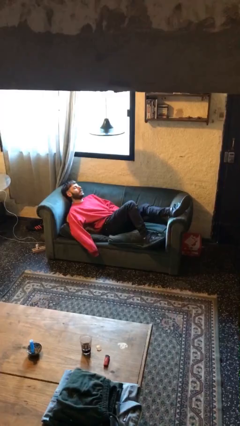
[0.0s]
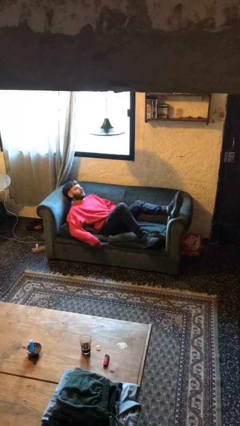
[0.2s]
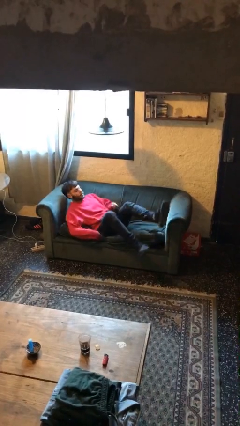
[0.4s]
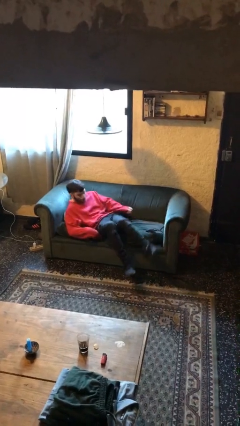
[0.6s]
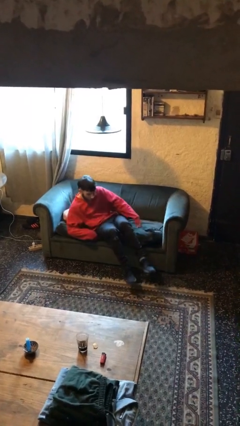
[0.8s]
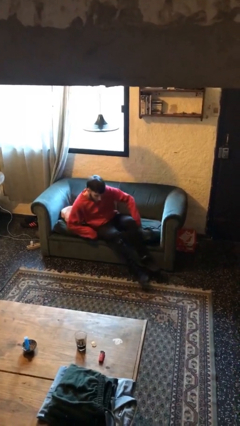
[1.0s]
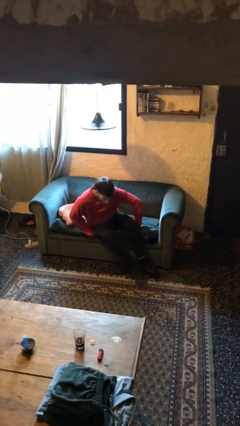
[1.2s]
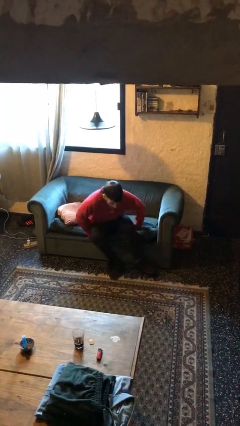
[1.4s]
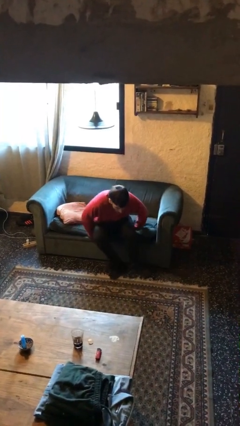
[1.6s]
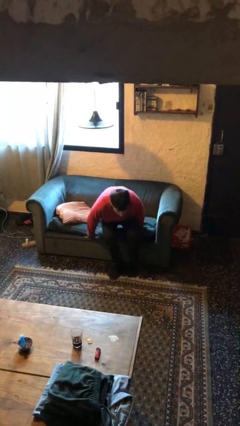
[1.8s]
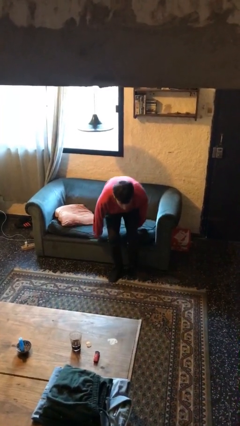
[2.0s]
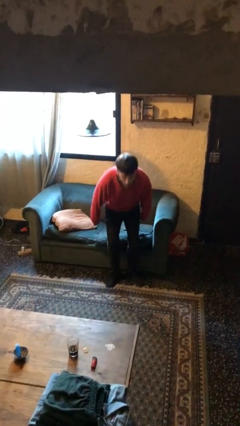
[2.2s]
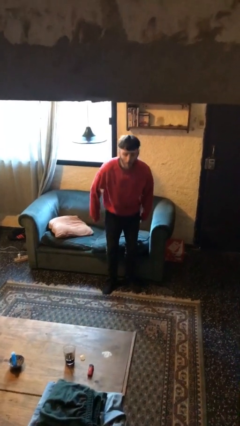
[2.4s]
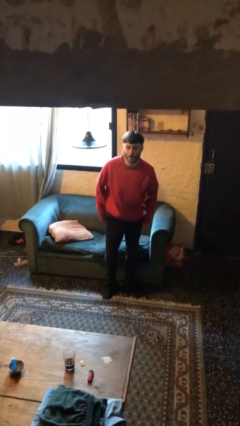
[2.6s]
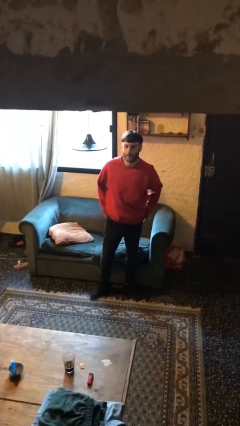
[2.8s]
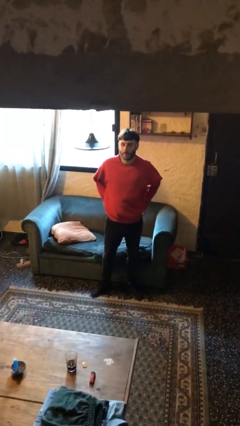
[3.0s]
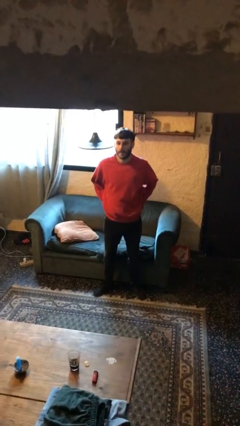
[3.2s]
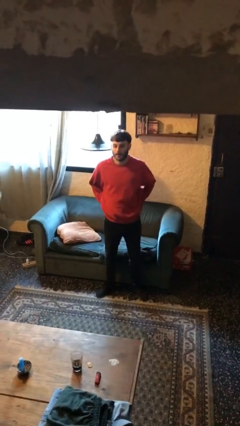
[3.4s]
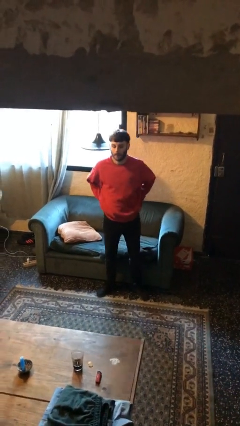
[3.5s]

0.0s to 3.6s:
person stands up

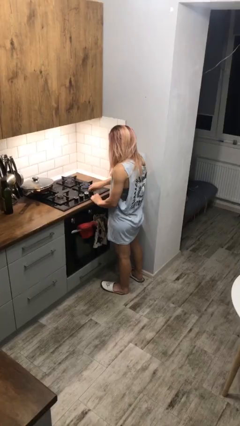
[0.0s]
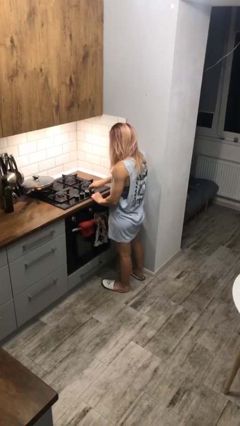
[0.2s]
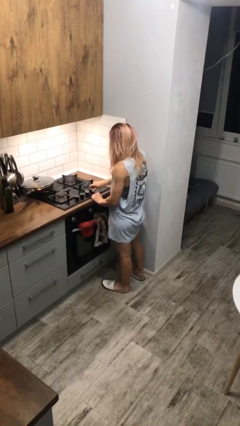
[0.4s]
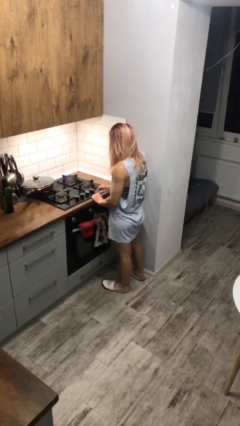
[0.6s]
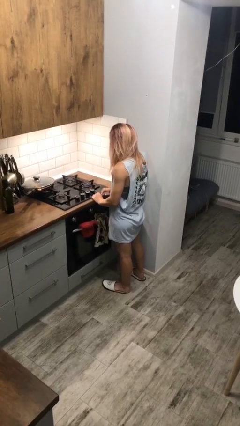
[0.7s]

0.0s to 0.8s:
person turns off stovetop

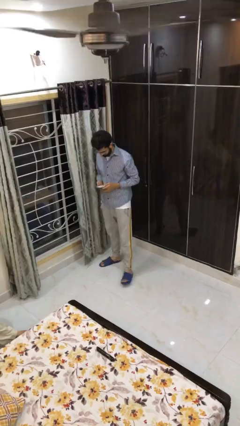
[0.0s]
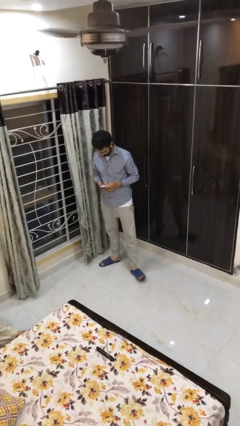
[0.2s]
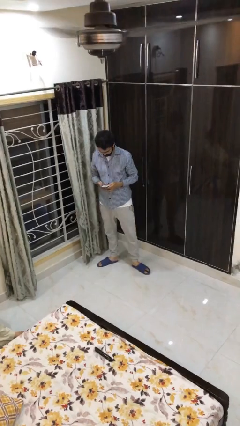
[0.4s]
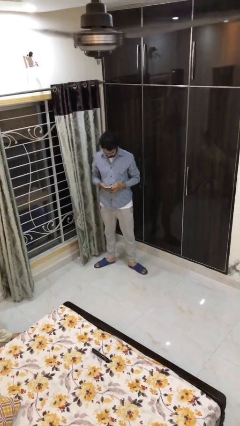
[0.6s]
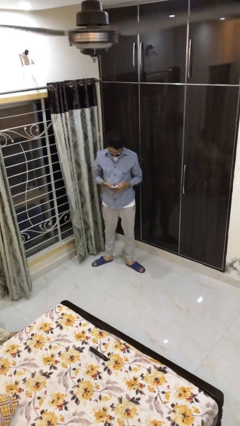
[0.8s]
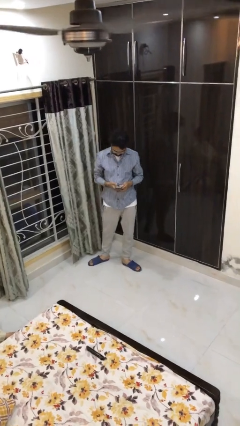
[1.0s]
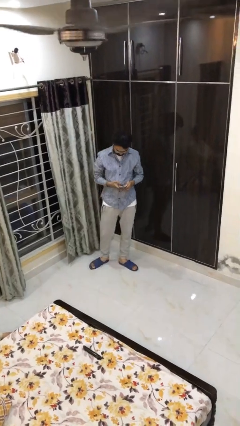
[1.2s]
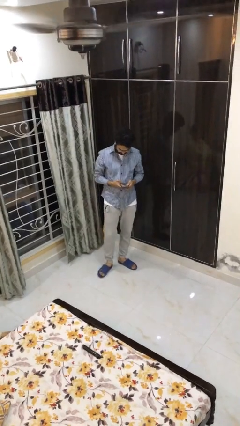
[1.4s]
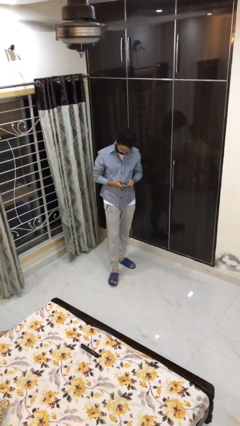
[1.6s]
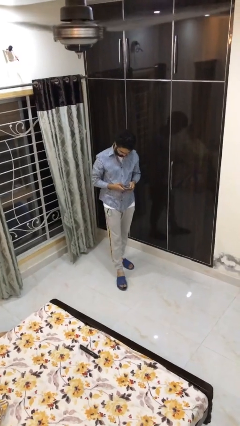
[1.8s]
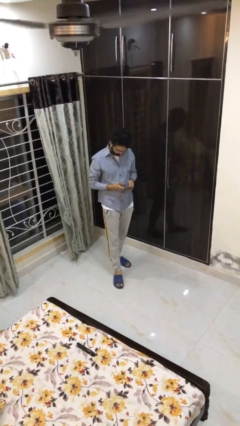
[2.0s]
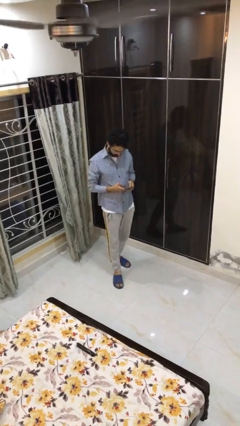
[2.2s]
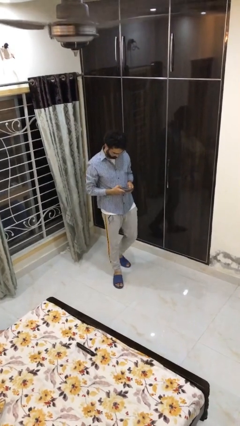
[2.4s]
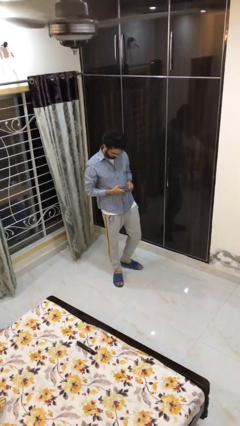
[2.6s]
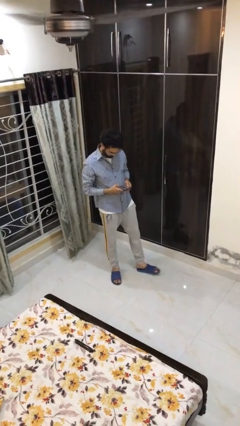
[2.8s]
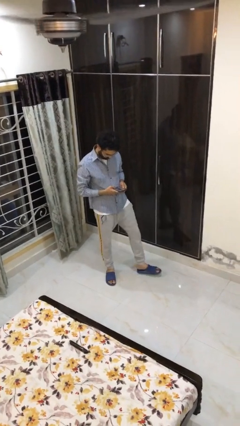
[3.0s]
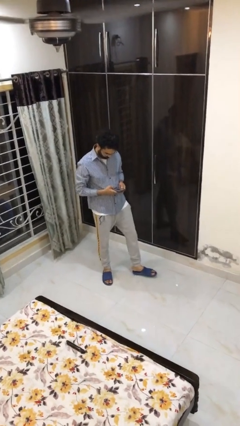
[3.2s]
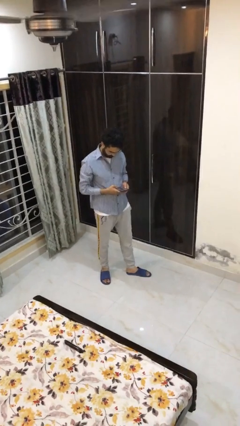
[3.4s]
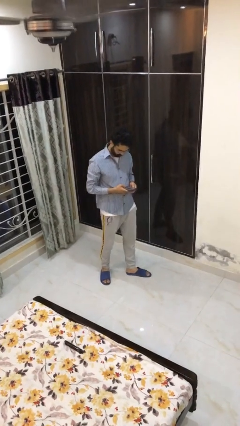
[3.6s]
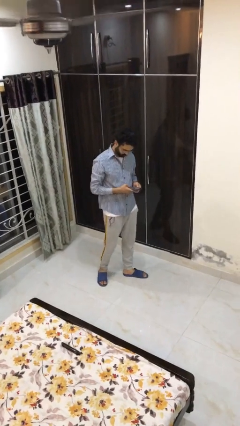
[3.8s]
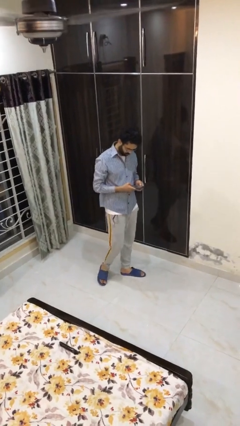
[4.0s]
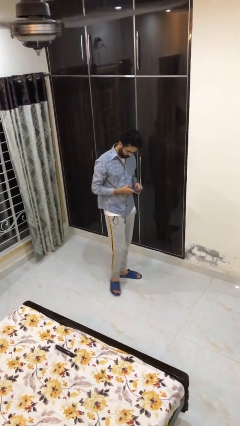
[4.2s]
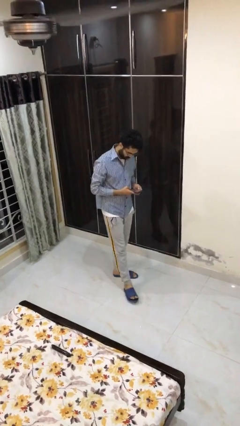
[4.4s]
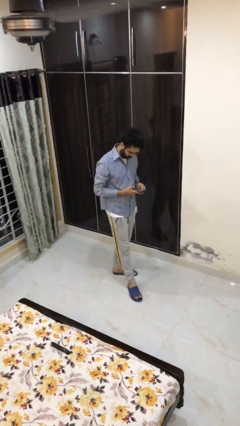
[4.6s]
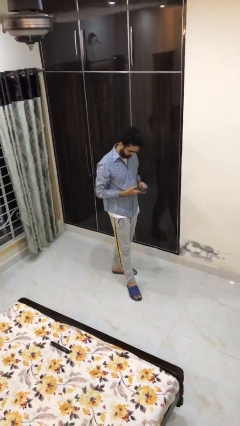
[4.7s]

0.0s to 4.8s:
person texts on phone

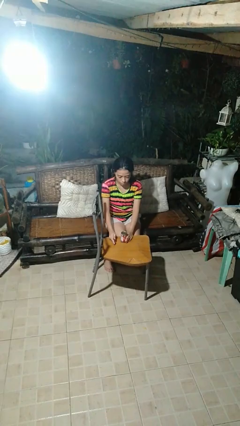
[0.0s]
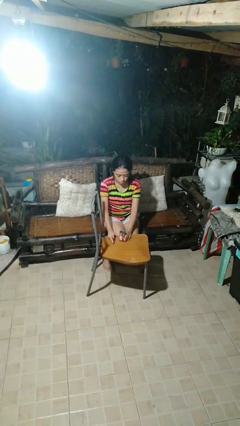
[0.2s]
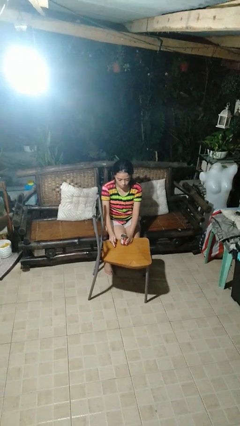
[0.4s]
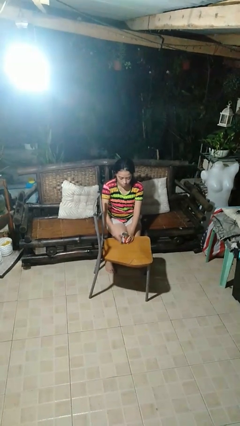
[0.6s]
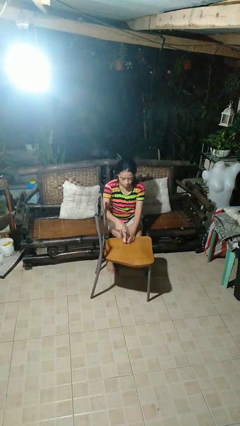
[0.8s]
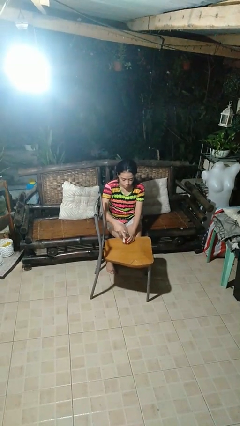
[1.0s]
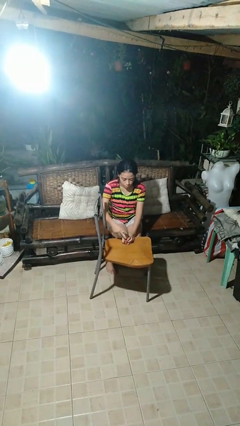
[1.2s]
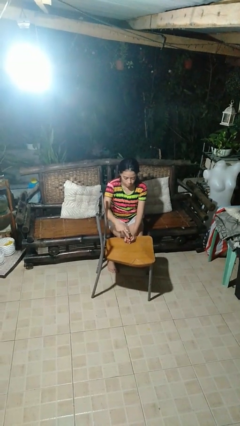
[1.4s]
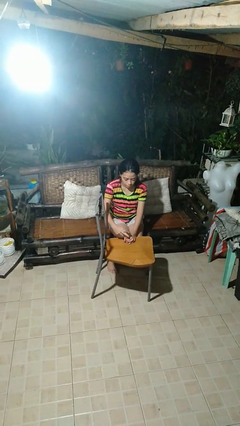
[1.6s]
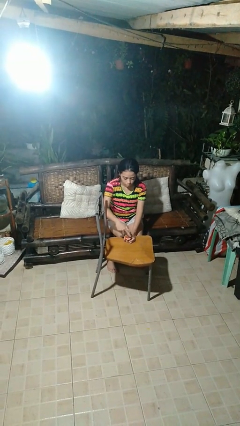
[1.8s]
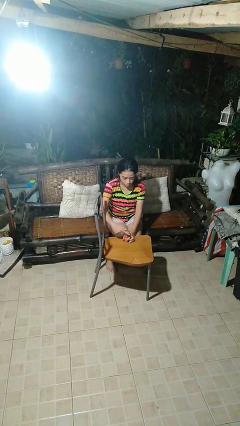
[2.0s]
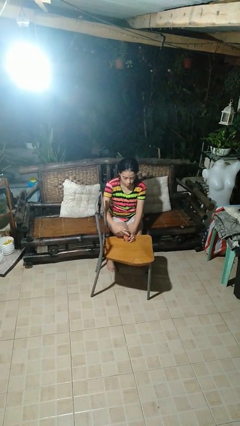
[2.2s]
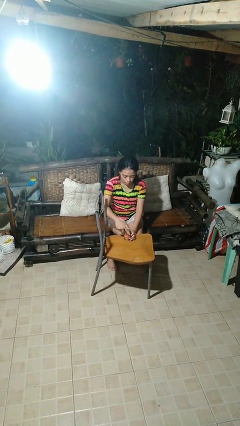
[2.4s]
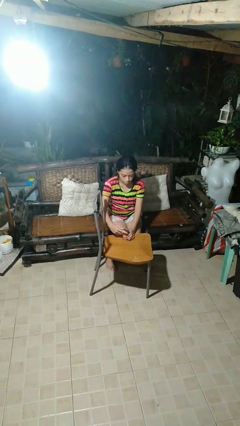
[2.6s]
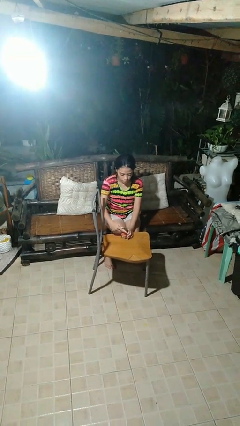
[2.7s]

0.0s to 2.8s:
person opens can with can opener

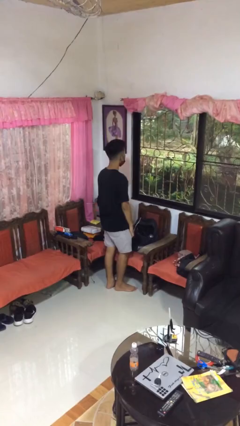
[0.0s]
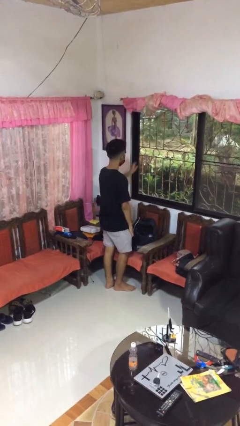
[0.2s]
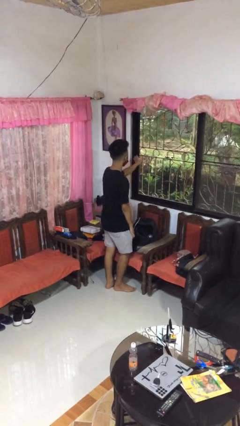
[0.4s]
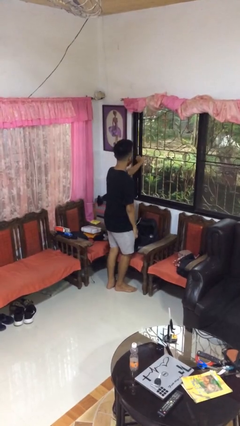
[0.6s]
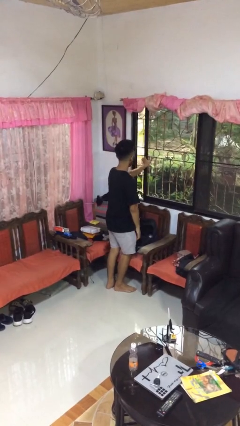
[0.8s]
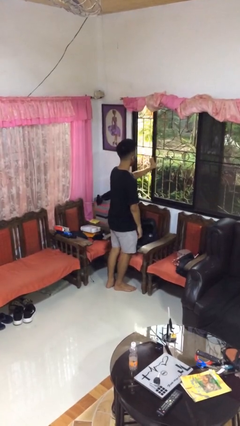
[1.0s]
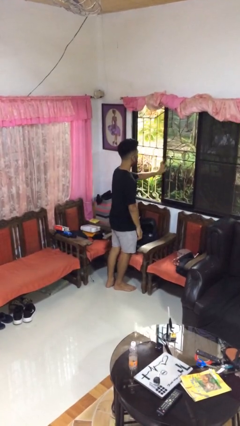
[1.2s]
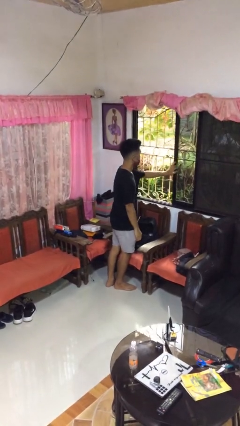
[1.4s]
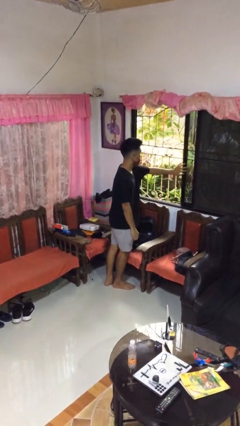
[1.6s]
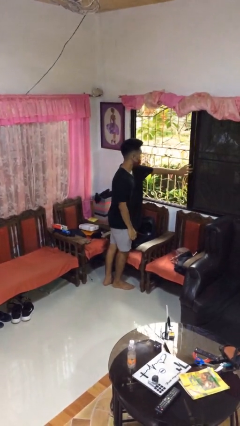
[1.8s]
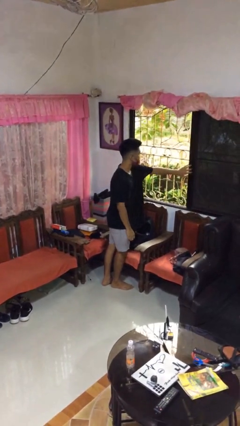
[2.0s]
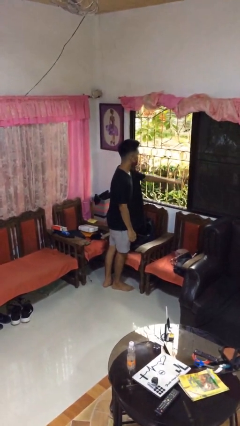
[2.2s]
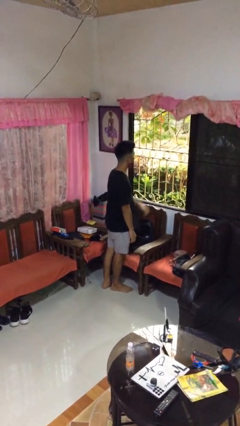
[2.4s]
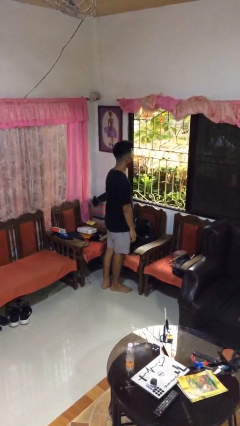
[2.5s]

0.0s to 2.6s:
person opens home window

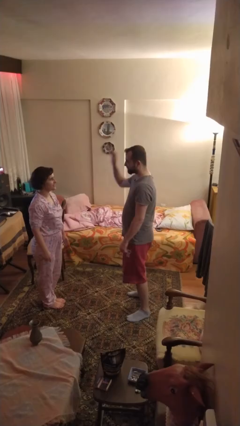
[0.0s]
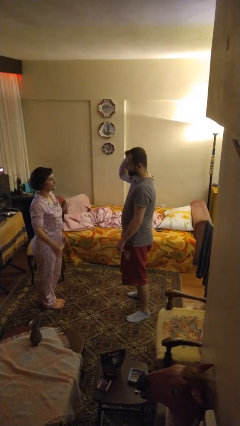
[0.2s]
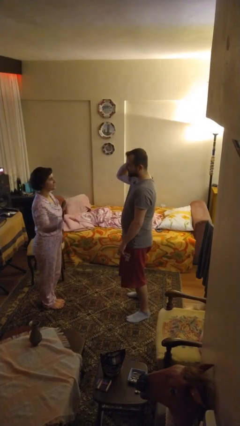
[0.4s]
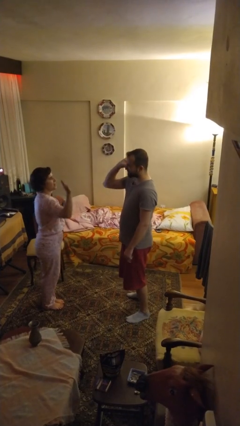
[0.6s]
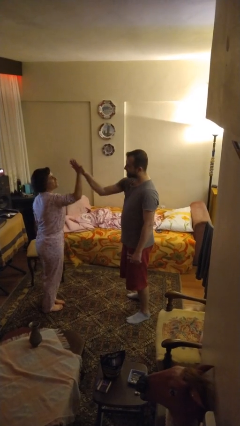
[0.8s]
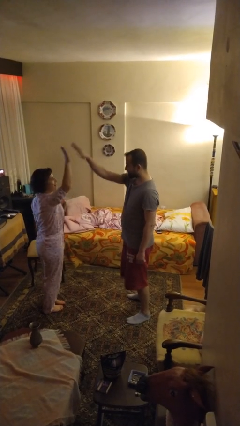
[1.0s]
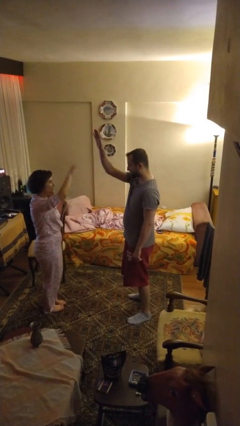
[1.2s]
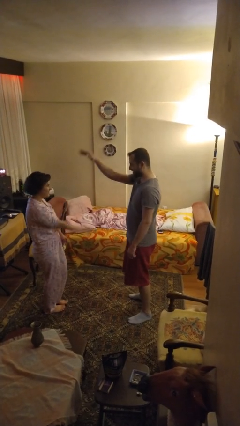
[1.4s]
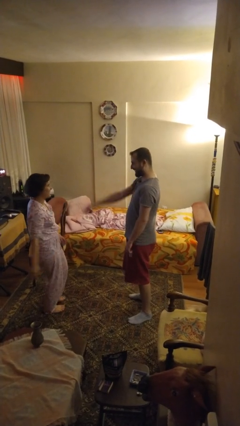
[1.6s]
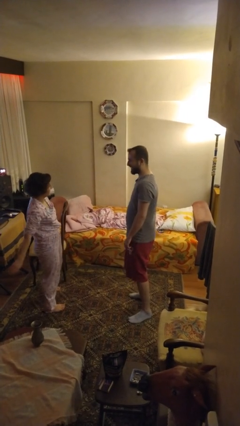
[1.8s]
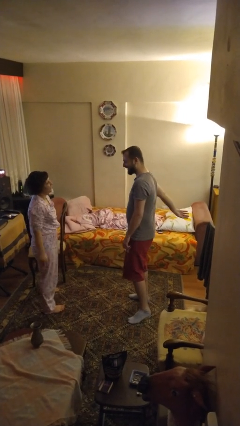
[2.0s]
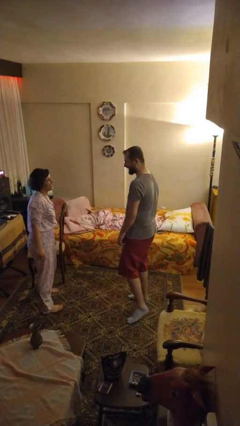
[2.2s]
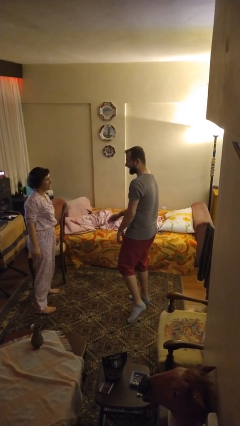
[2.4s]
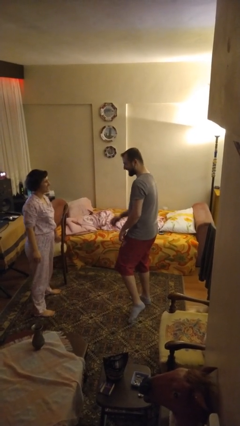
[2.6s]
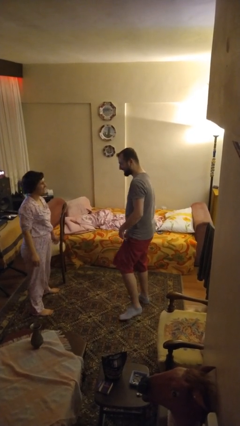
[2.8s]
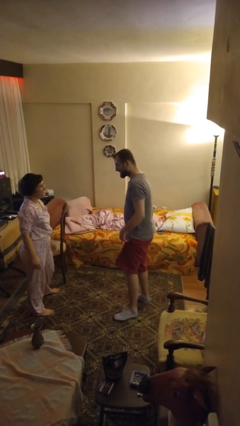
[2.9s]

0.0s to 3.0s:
person highfives hand
